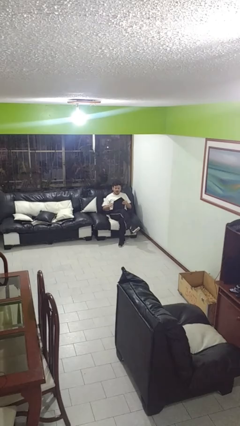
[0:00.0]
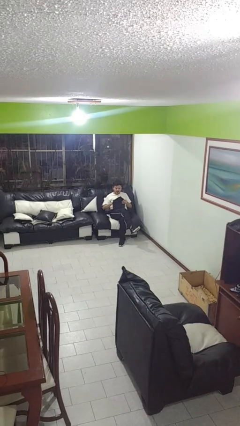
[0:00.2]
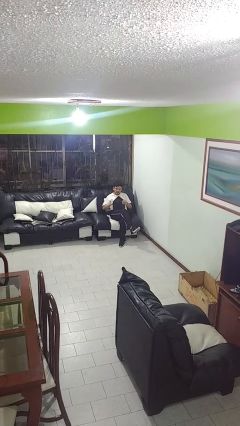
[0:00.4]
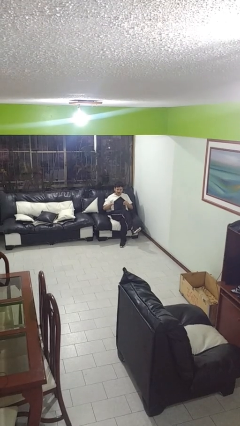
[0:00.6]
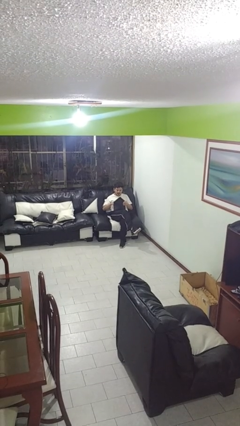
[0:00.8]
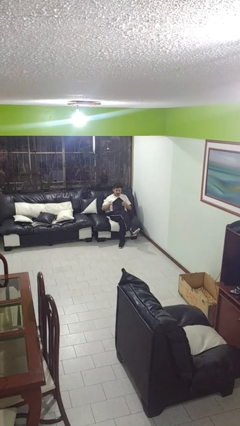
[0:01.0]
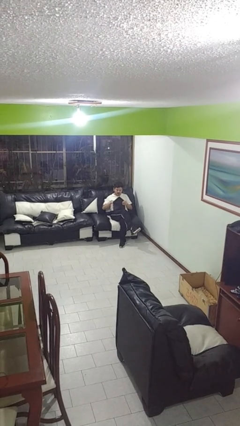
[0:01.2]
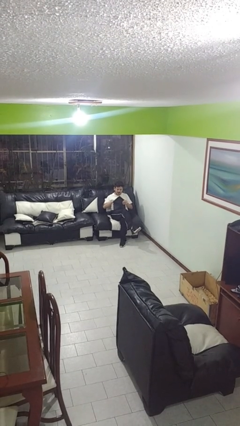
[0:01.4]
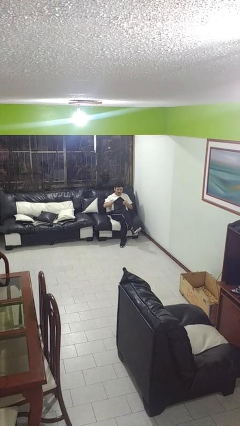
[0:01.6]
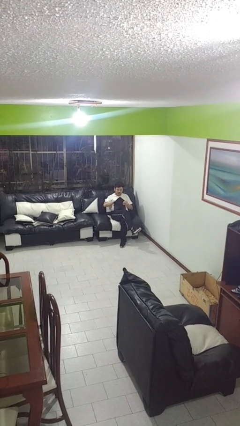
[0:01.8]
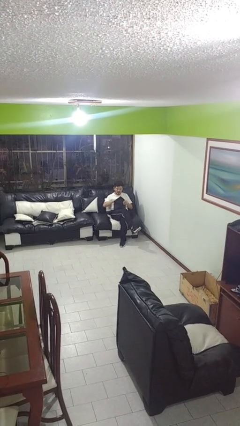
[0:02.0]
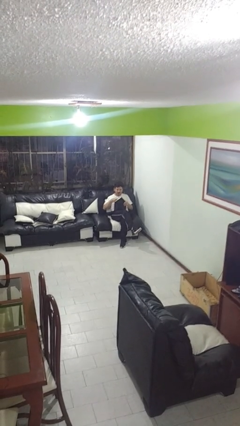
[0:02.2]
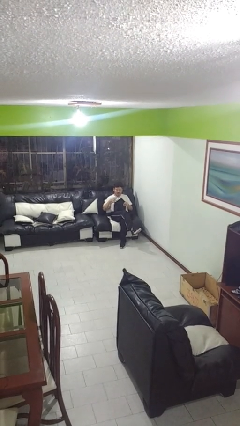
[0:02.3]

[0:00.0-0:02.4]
person searches in purse

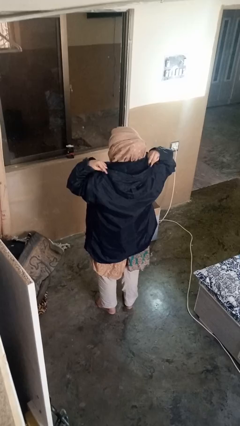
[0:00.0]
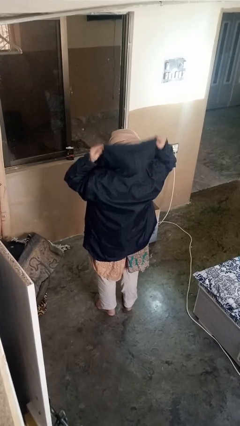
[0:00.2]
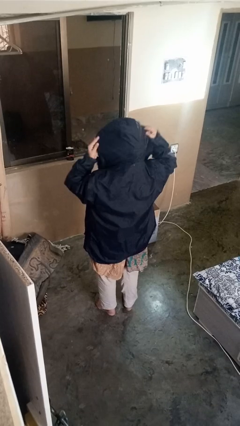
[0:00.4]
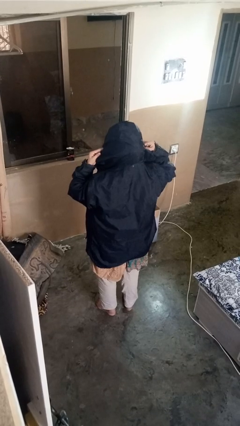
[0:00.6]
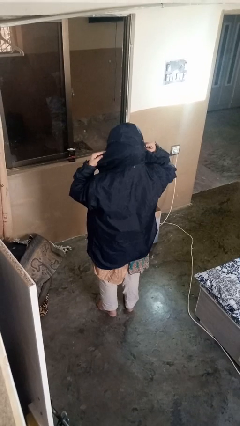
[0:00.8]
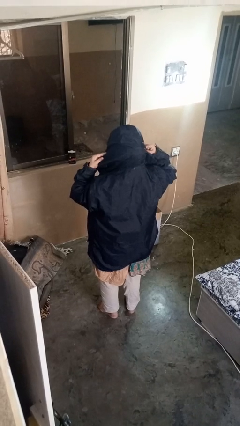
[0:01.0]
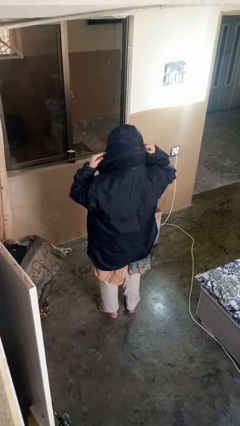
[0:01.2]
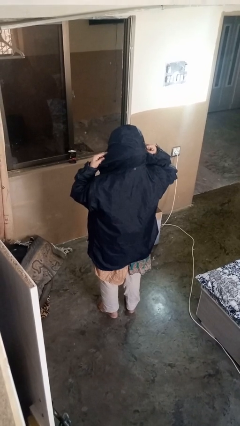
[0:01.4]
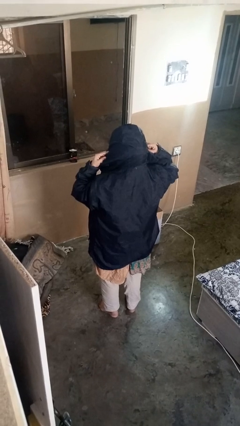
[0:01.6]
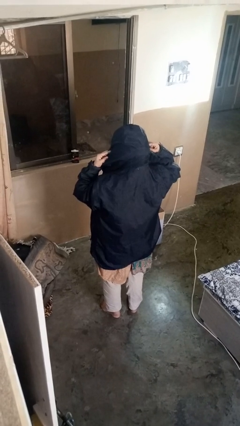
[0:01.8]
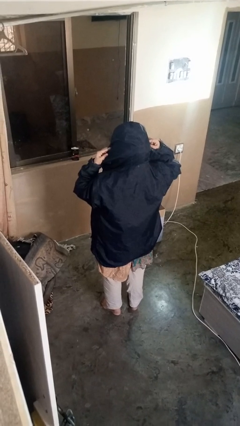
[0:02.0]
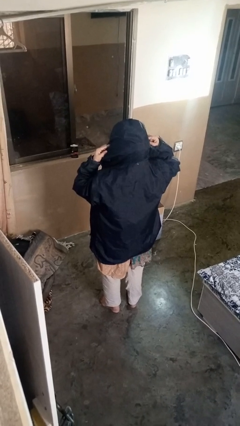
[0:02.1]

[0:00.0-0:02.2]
person puts on hat

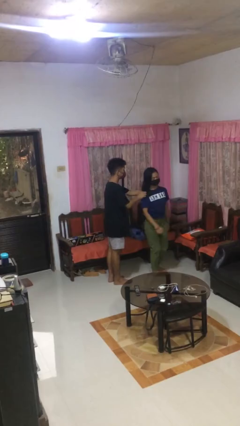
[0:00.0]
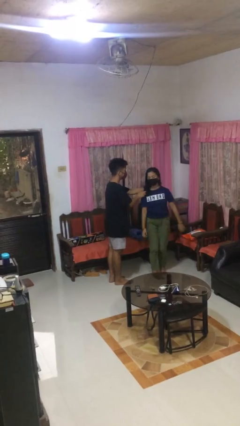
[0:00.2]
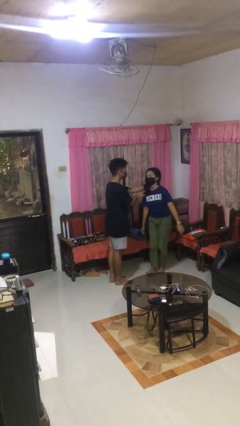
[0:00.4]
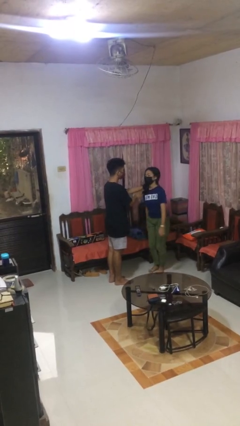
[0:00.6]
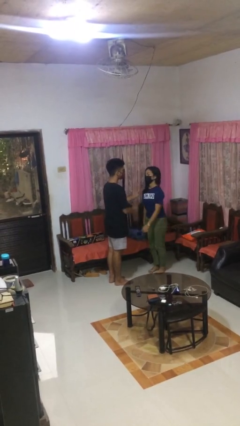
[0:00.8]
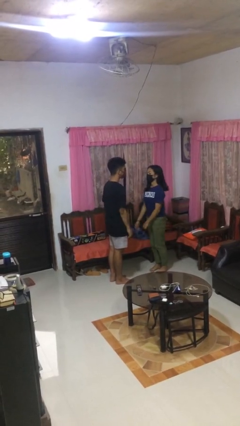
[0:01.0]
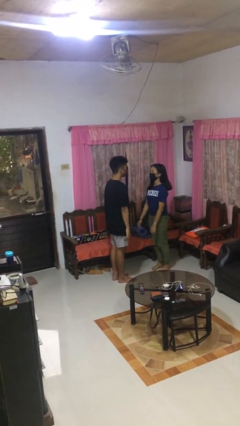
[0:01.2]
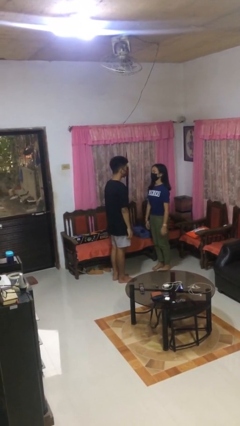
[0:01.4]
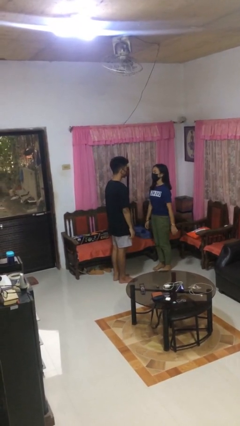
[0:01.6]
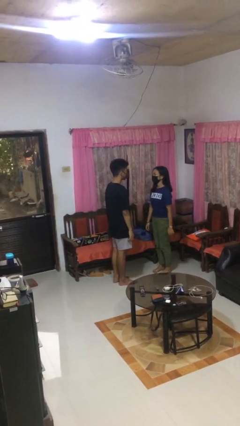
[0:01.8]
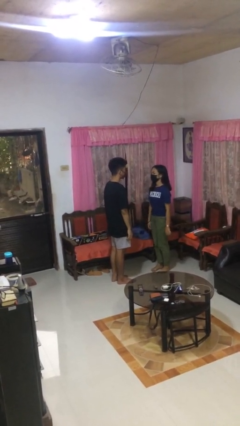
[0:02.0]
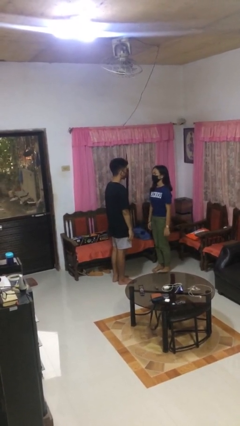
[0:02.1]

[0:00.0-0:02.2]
person spins person around

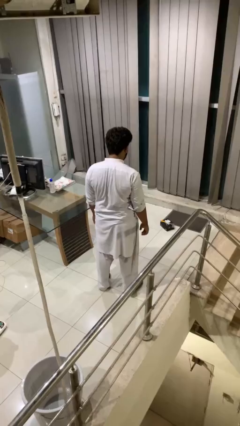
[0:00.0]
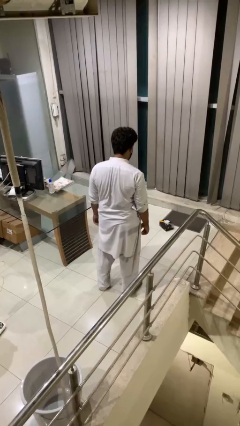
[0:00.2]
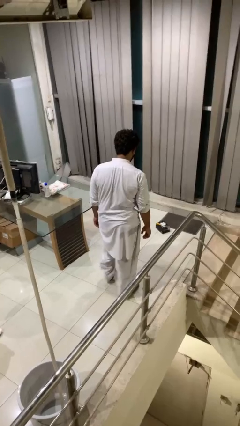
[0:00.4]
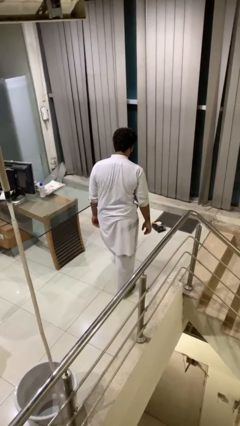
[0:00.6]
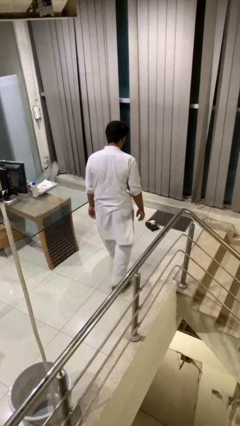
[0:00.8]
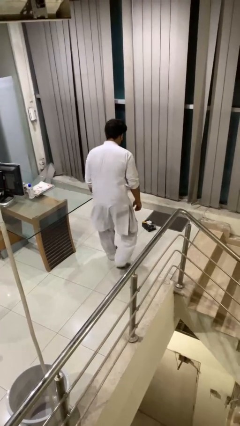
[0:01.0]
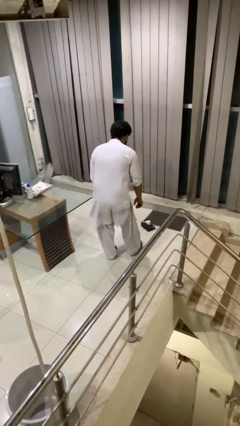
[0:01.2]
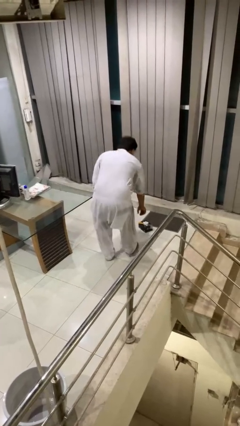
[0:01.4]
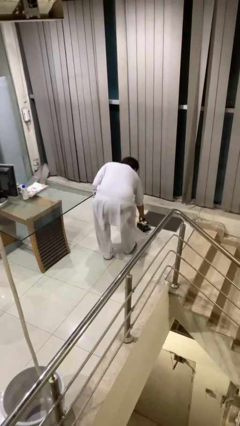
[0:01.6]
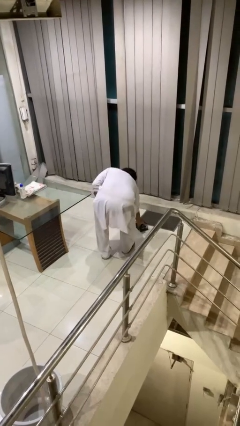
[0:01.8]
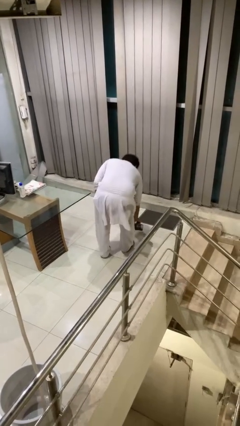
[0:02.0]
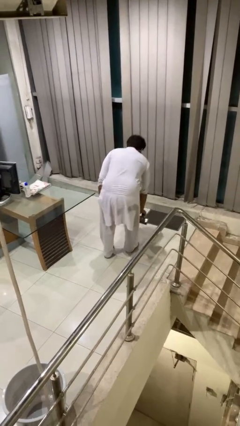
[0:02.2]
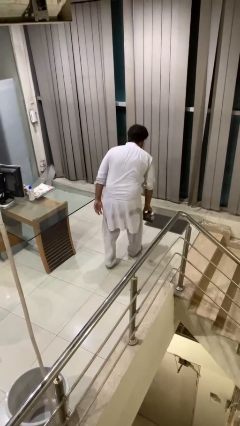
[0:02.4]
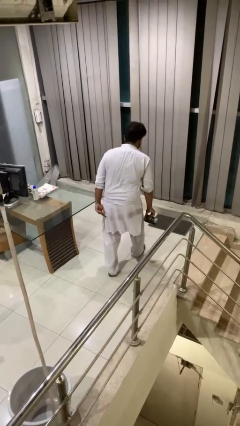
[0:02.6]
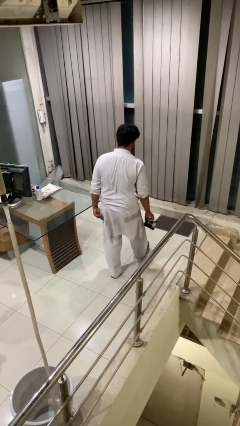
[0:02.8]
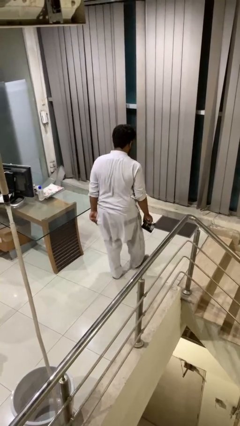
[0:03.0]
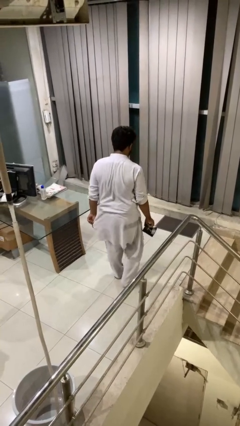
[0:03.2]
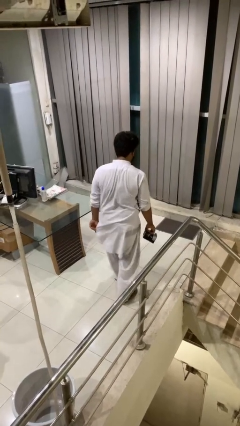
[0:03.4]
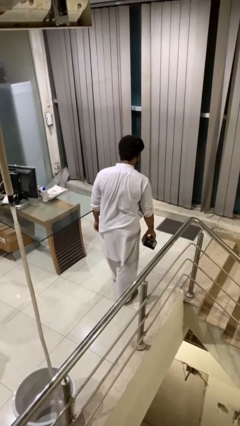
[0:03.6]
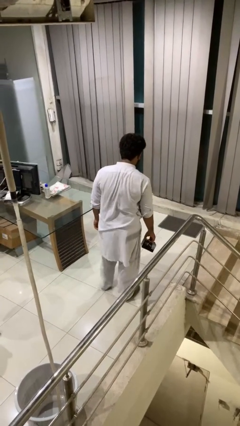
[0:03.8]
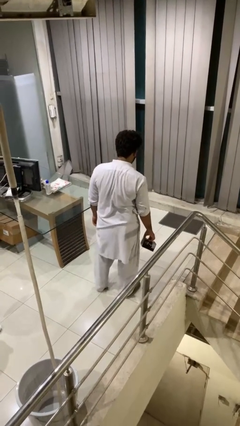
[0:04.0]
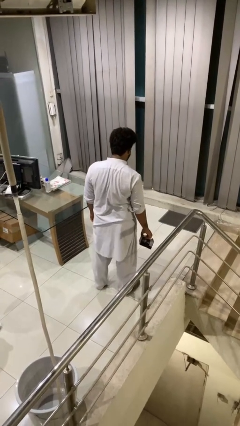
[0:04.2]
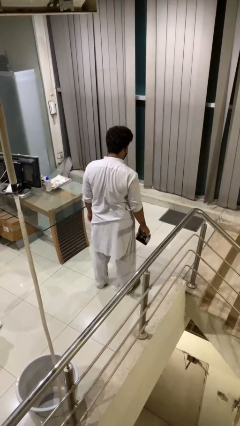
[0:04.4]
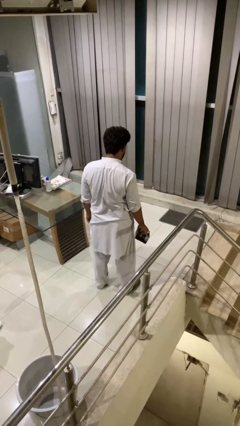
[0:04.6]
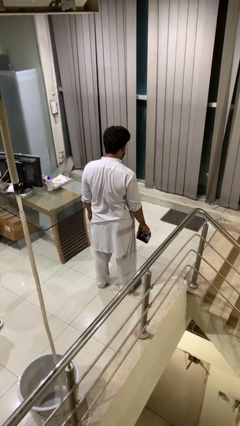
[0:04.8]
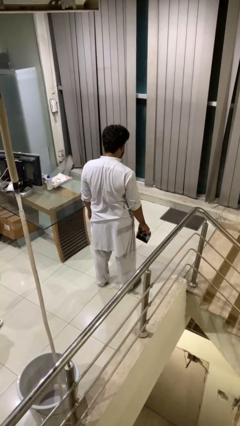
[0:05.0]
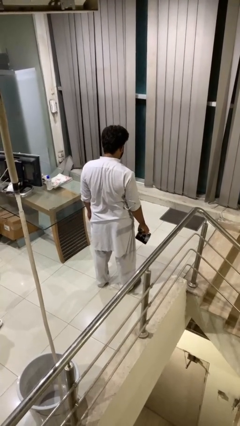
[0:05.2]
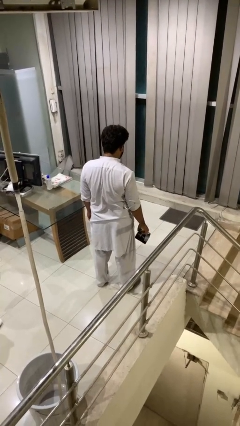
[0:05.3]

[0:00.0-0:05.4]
person picks up object from floor

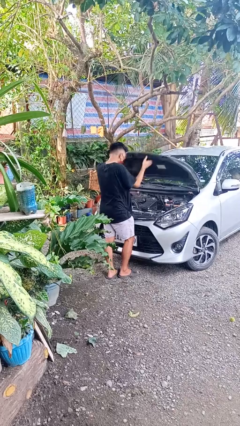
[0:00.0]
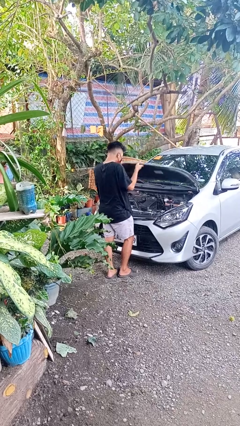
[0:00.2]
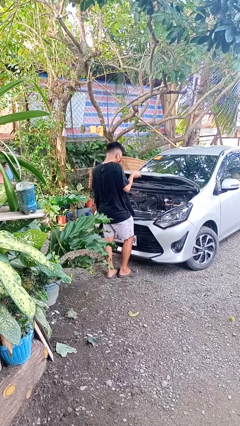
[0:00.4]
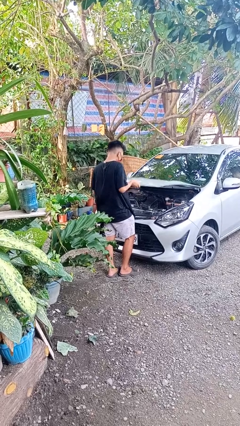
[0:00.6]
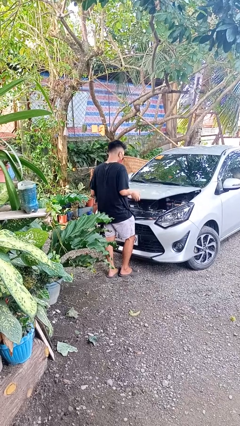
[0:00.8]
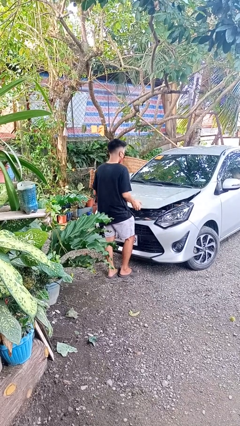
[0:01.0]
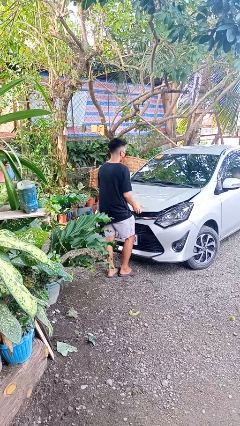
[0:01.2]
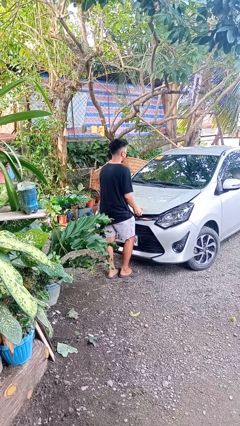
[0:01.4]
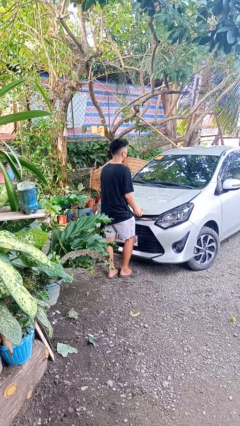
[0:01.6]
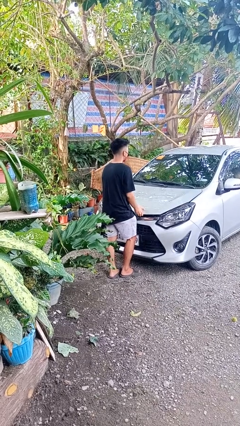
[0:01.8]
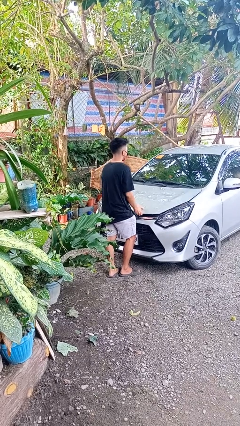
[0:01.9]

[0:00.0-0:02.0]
person closes car hood

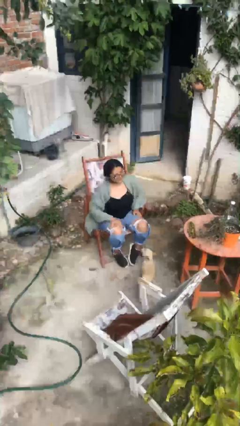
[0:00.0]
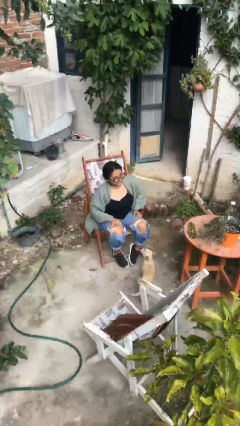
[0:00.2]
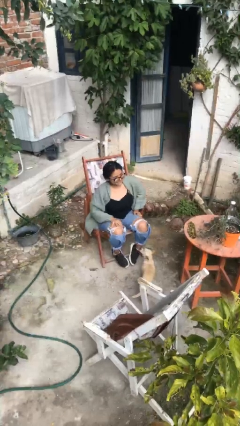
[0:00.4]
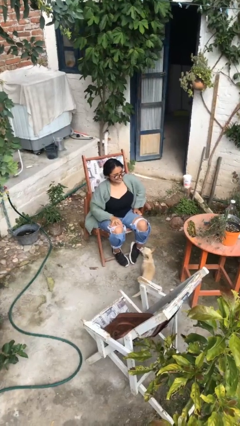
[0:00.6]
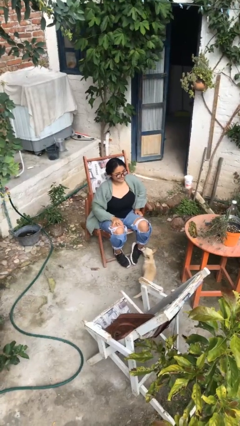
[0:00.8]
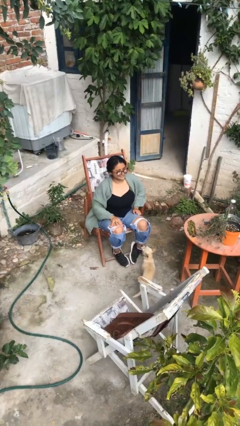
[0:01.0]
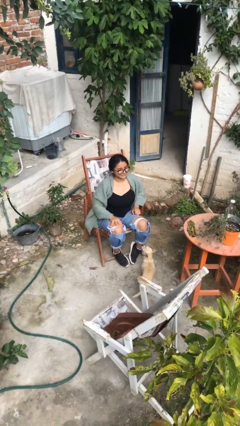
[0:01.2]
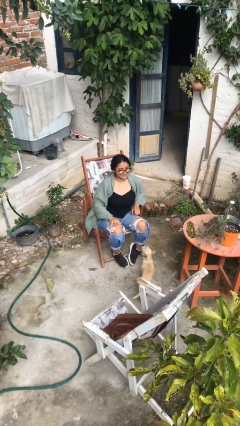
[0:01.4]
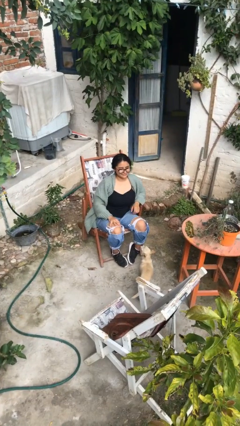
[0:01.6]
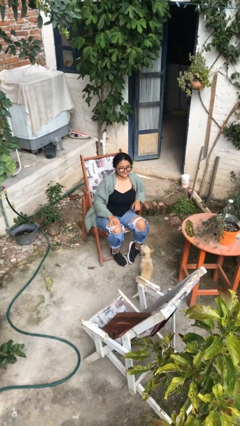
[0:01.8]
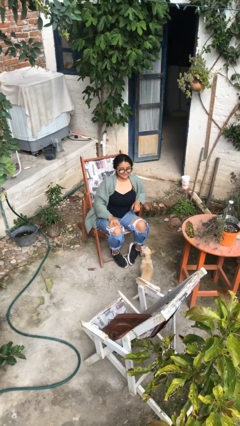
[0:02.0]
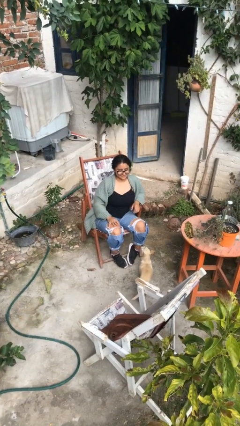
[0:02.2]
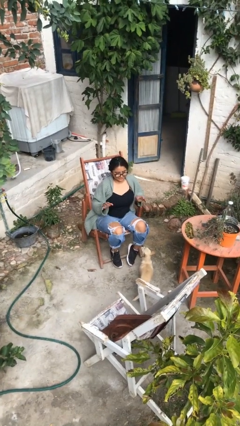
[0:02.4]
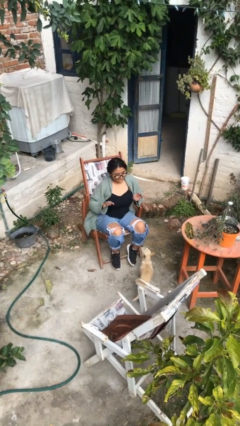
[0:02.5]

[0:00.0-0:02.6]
person slaps hands on thighs

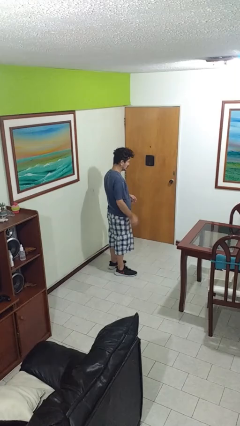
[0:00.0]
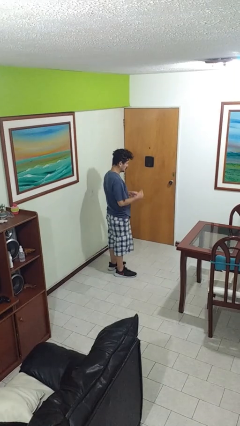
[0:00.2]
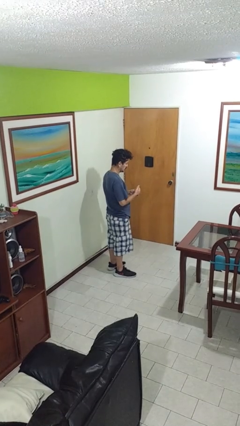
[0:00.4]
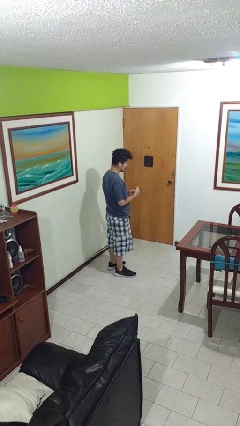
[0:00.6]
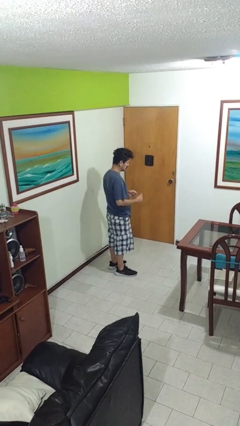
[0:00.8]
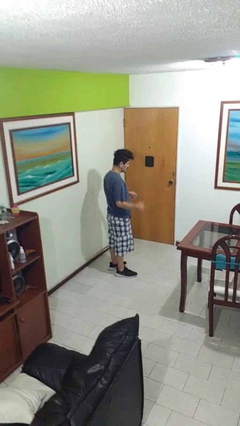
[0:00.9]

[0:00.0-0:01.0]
person takes off ring
